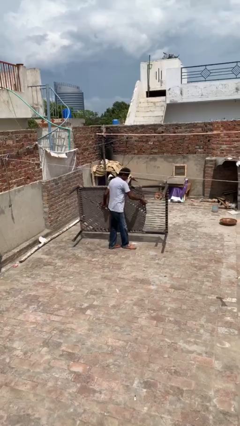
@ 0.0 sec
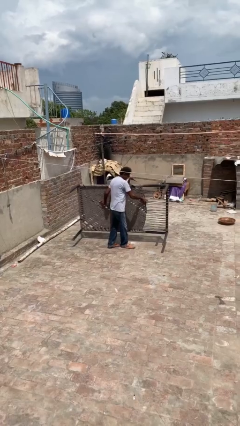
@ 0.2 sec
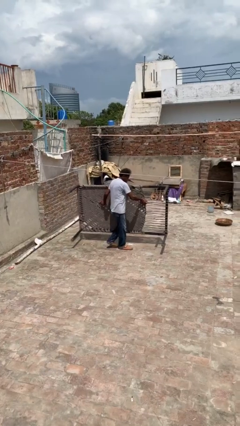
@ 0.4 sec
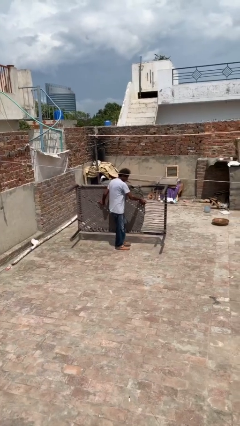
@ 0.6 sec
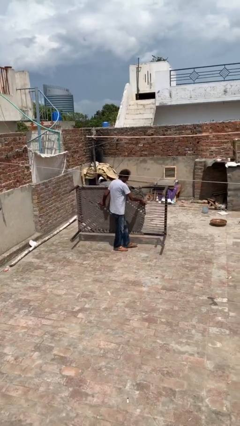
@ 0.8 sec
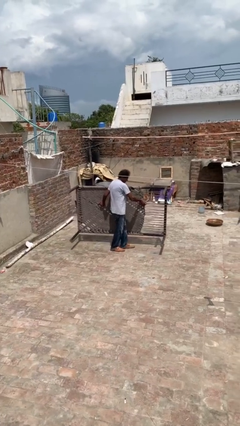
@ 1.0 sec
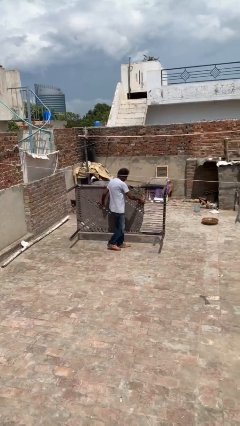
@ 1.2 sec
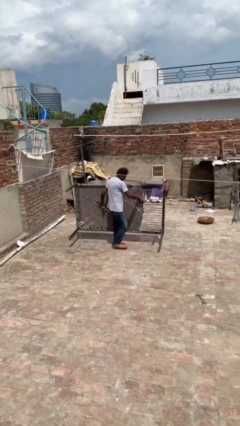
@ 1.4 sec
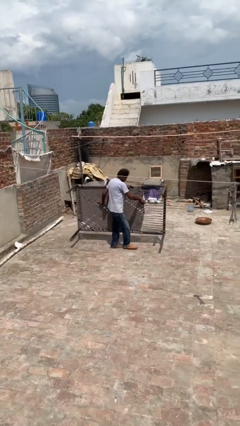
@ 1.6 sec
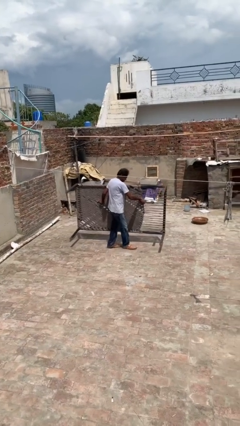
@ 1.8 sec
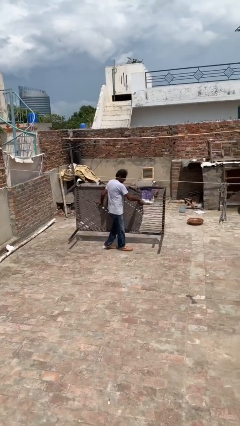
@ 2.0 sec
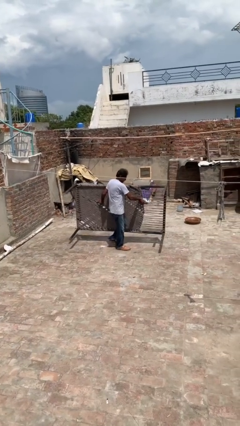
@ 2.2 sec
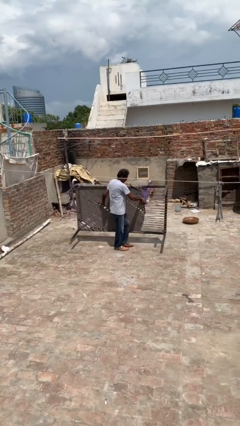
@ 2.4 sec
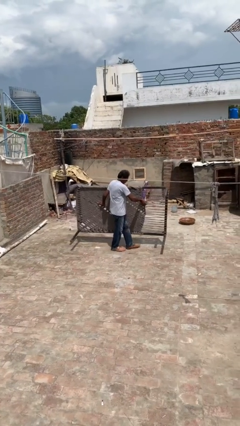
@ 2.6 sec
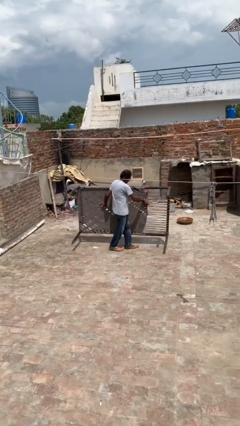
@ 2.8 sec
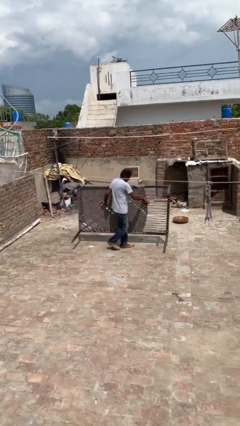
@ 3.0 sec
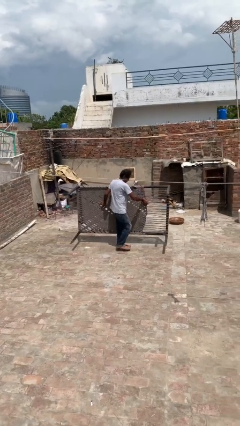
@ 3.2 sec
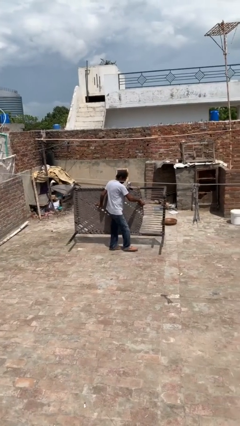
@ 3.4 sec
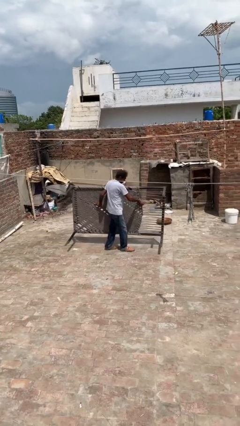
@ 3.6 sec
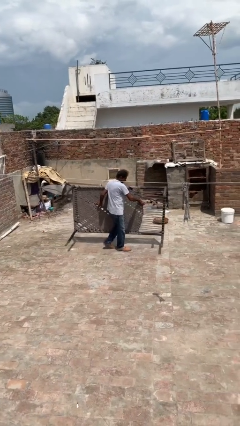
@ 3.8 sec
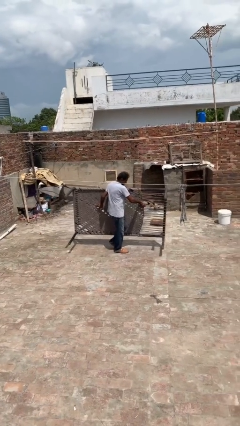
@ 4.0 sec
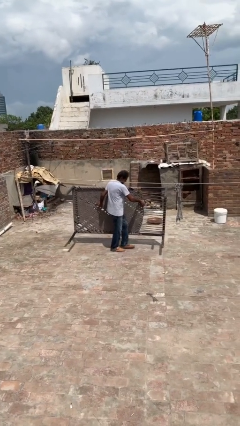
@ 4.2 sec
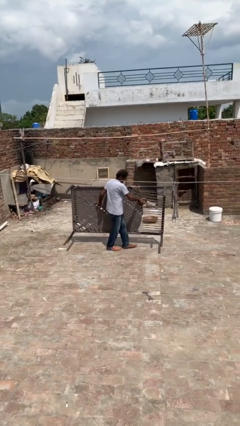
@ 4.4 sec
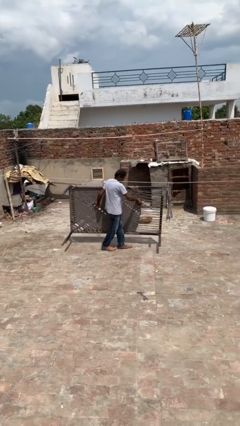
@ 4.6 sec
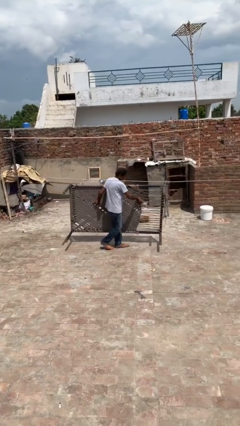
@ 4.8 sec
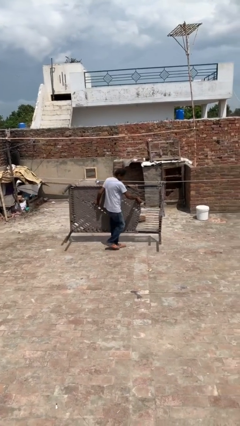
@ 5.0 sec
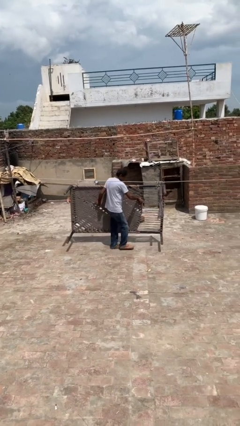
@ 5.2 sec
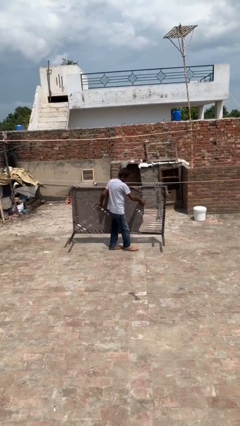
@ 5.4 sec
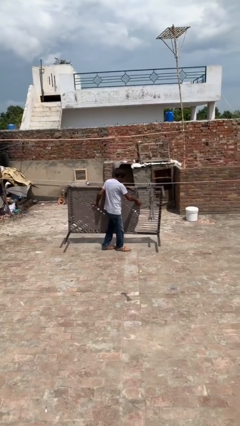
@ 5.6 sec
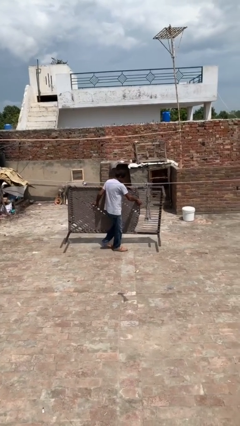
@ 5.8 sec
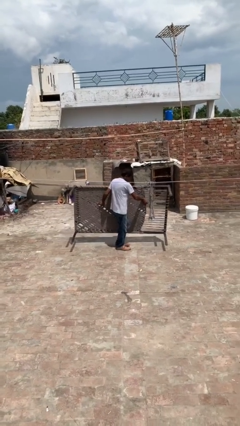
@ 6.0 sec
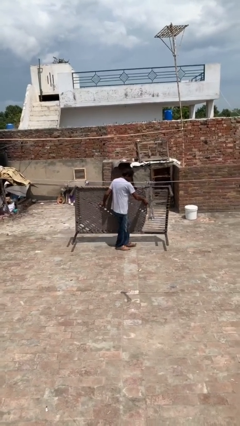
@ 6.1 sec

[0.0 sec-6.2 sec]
person carries heavy object

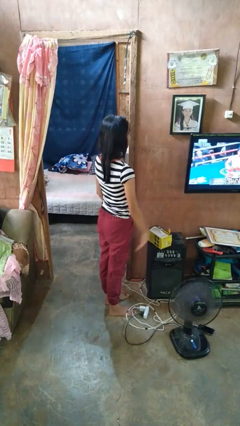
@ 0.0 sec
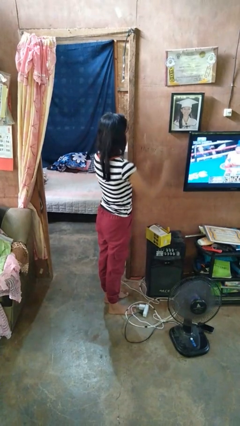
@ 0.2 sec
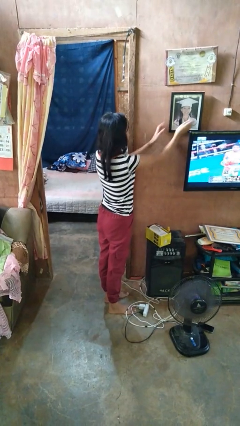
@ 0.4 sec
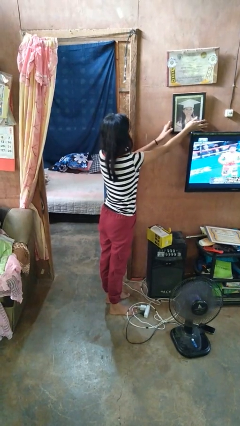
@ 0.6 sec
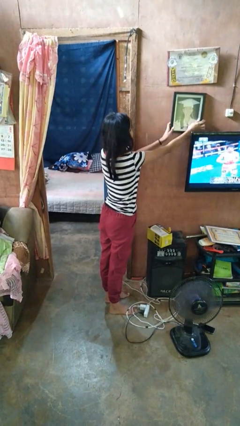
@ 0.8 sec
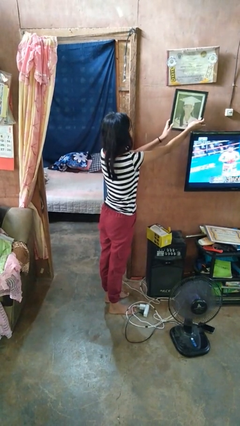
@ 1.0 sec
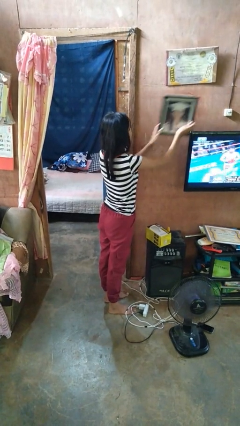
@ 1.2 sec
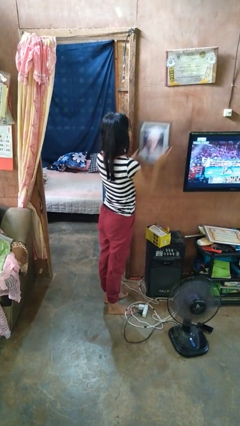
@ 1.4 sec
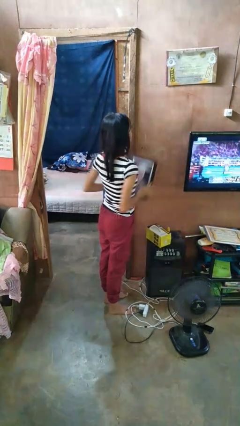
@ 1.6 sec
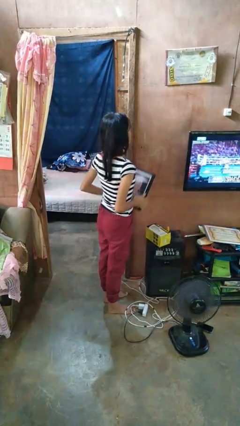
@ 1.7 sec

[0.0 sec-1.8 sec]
person takes down picture frame

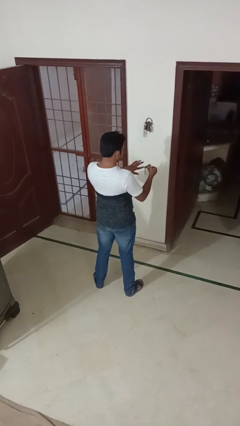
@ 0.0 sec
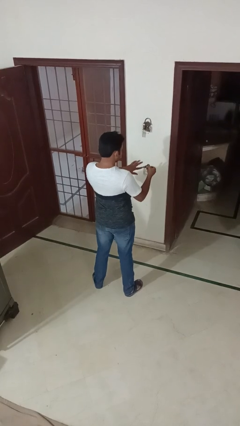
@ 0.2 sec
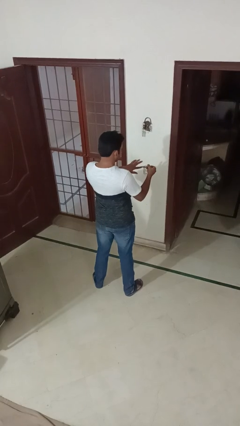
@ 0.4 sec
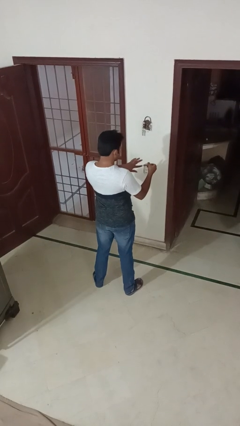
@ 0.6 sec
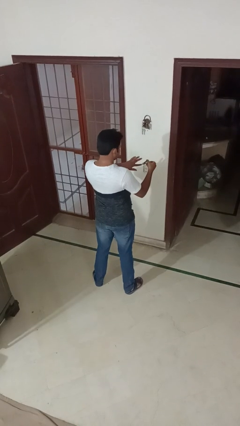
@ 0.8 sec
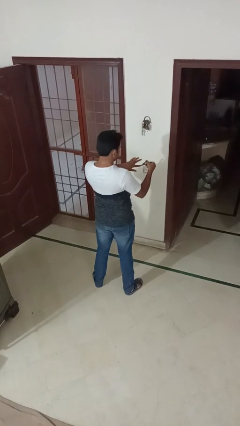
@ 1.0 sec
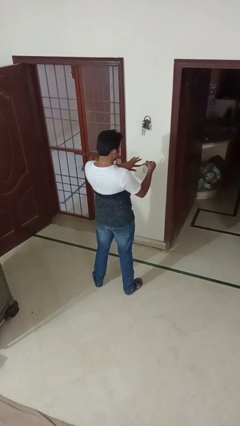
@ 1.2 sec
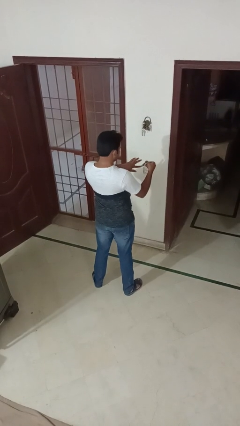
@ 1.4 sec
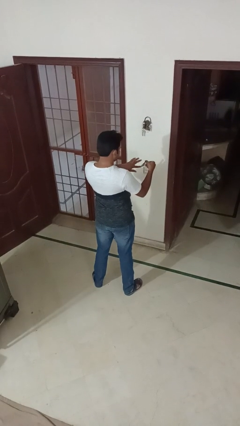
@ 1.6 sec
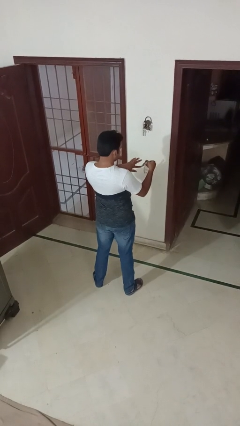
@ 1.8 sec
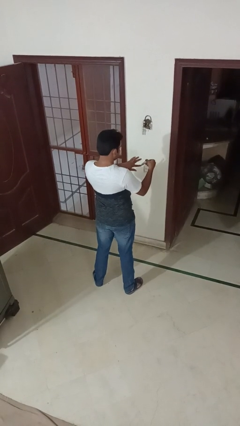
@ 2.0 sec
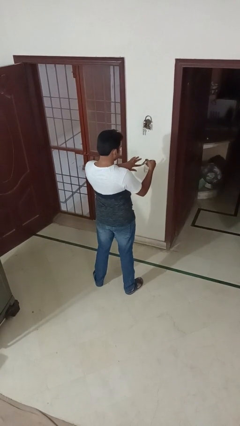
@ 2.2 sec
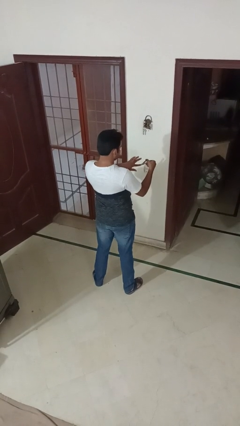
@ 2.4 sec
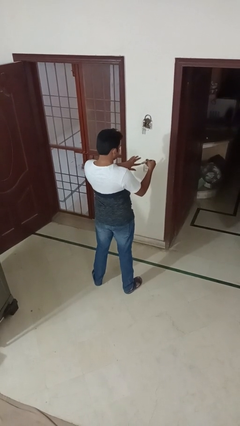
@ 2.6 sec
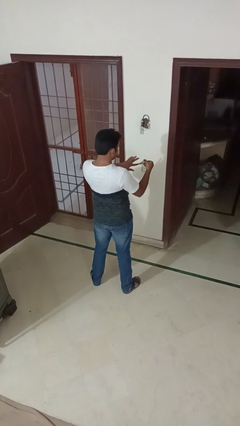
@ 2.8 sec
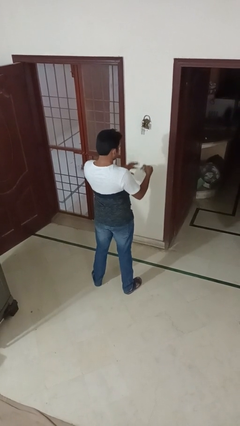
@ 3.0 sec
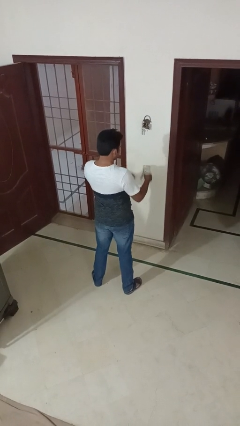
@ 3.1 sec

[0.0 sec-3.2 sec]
person clips fingernails

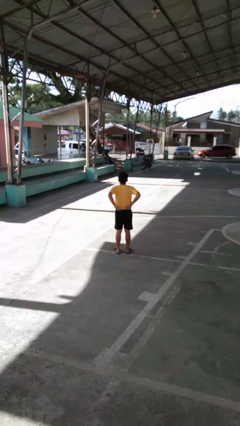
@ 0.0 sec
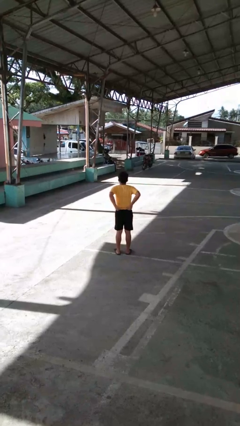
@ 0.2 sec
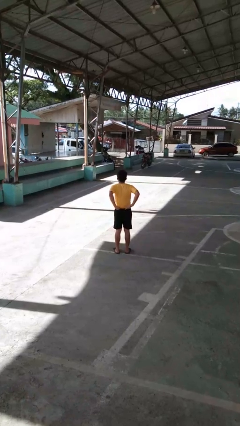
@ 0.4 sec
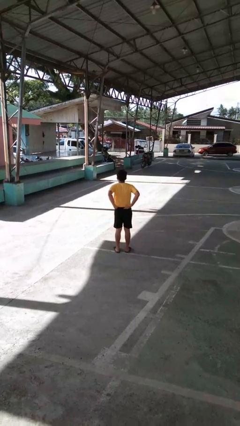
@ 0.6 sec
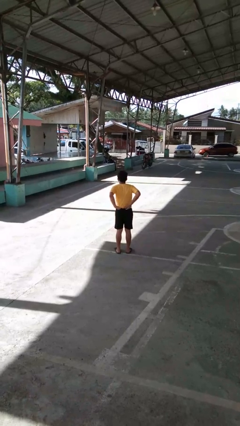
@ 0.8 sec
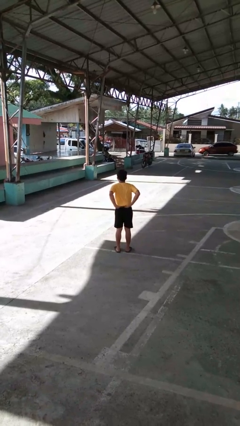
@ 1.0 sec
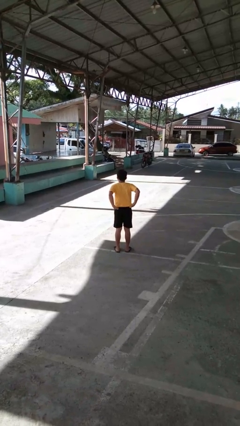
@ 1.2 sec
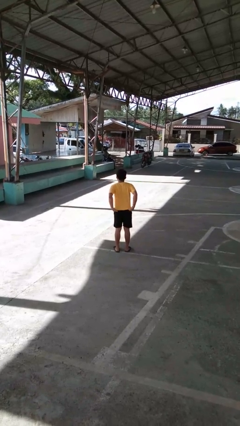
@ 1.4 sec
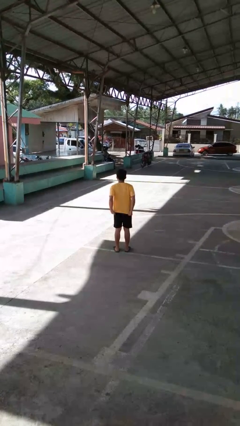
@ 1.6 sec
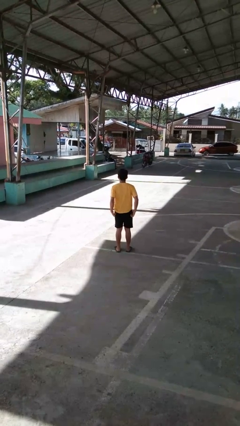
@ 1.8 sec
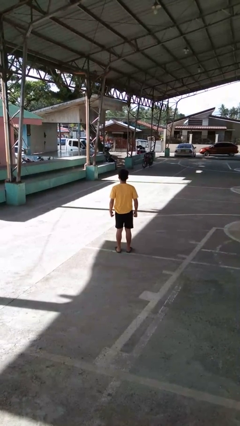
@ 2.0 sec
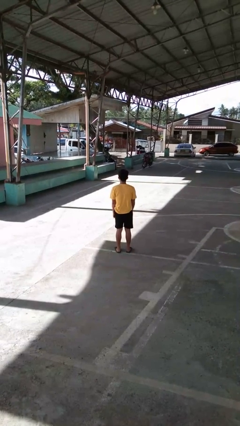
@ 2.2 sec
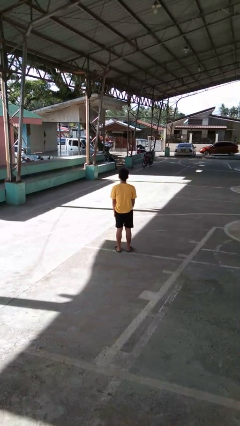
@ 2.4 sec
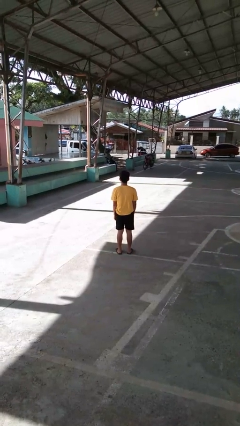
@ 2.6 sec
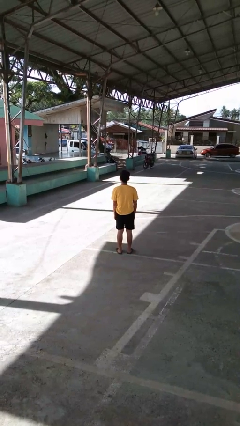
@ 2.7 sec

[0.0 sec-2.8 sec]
person untucks shirt

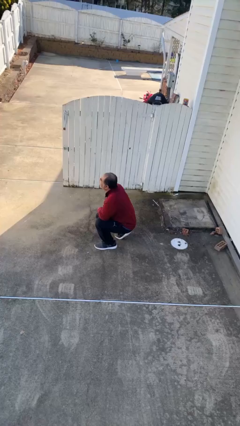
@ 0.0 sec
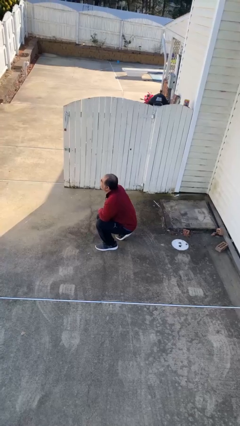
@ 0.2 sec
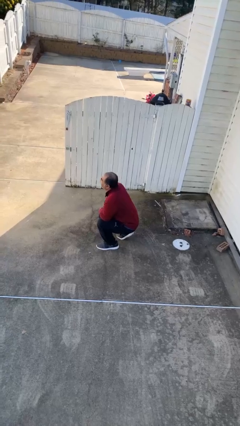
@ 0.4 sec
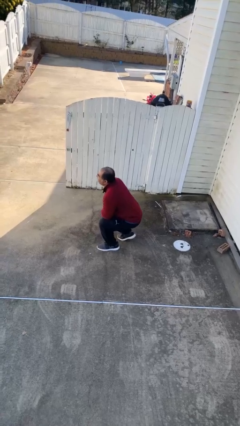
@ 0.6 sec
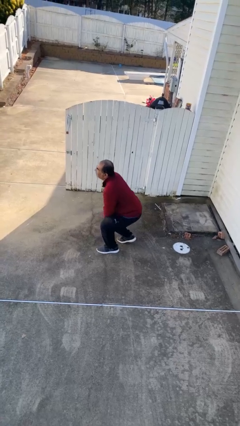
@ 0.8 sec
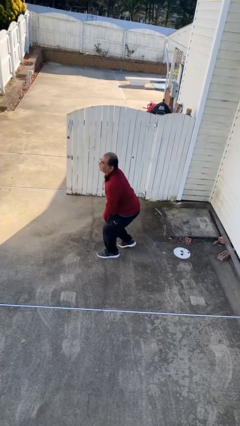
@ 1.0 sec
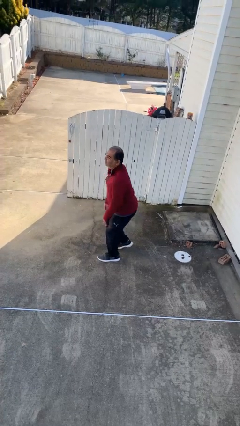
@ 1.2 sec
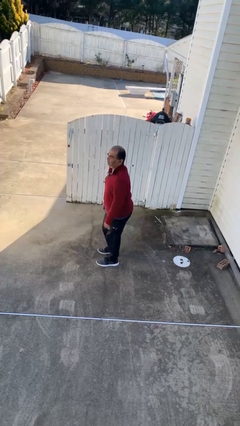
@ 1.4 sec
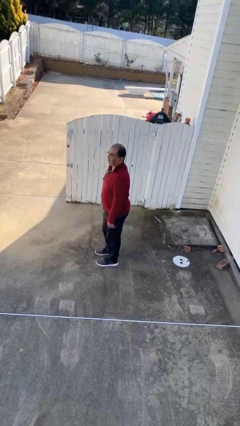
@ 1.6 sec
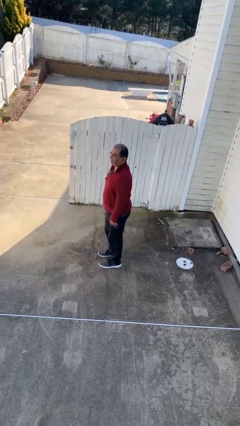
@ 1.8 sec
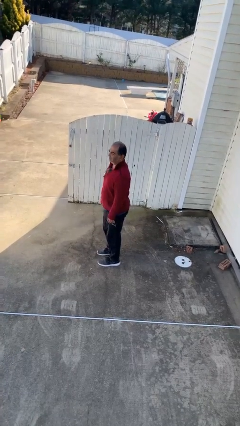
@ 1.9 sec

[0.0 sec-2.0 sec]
person stands up

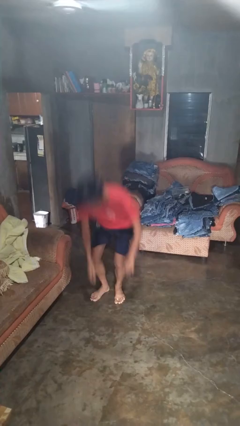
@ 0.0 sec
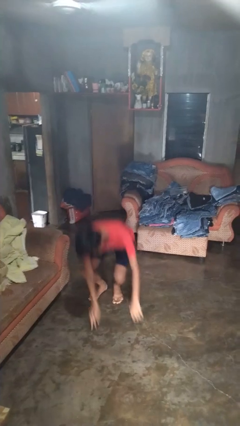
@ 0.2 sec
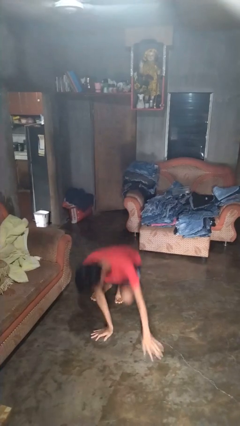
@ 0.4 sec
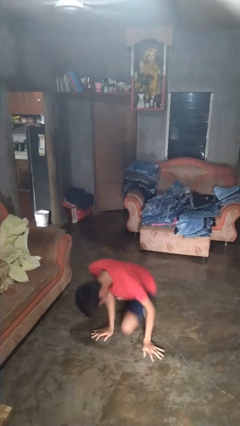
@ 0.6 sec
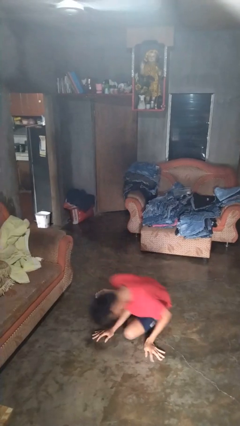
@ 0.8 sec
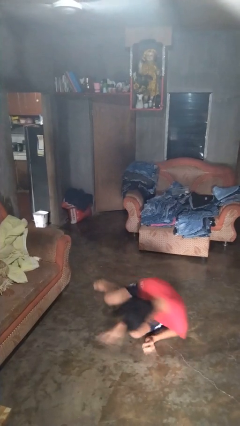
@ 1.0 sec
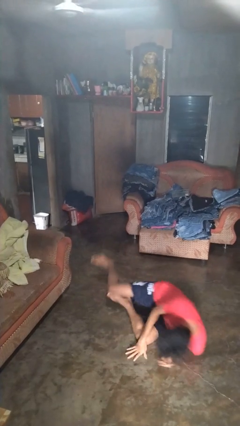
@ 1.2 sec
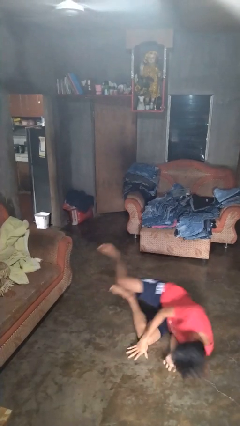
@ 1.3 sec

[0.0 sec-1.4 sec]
person falls while standing
